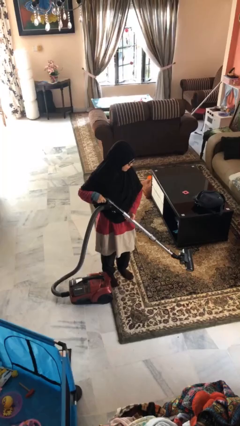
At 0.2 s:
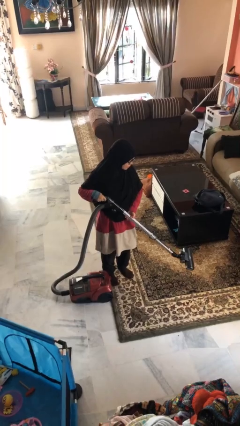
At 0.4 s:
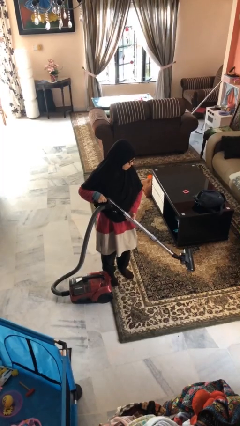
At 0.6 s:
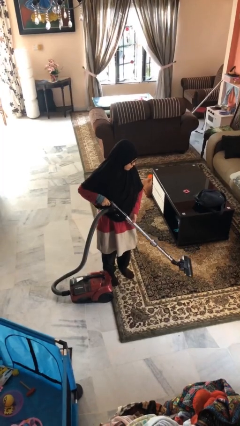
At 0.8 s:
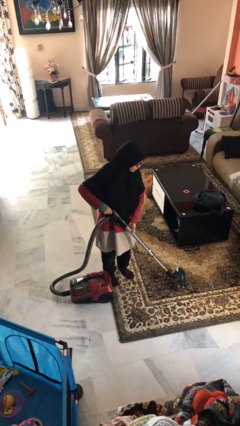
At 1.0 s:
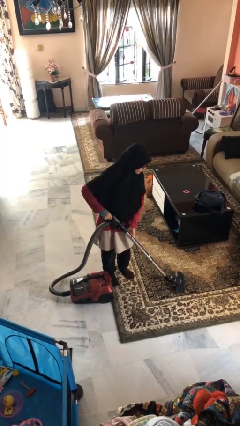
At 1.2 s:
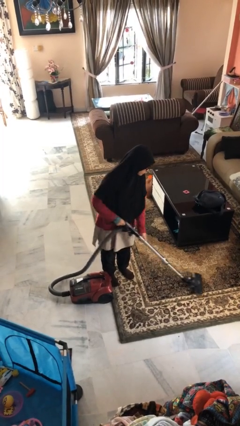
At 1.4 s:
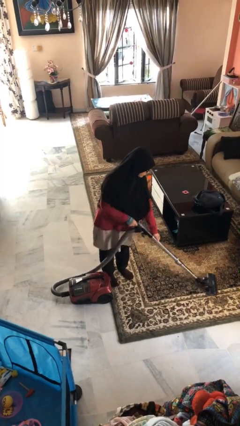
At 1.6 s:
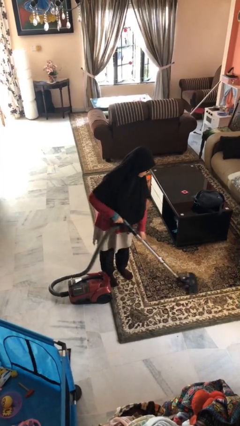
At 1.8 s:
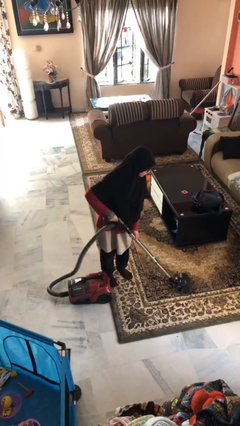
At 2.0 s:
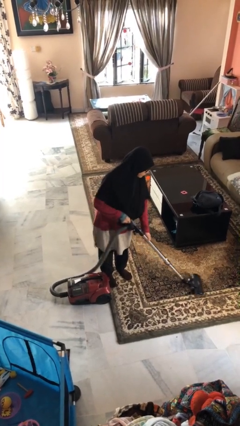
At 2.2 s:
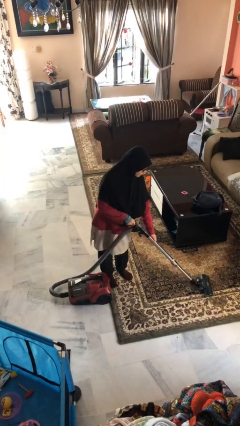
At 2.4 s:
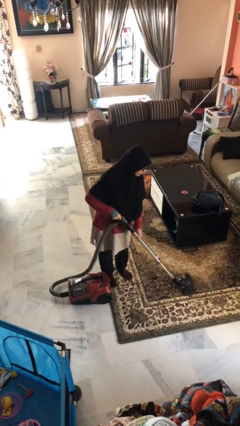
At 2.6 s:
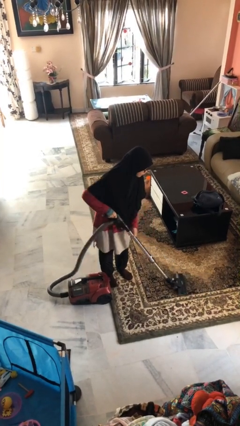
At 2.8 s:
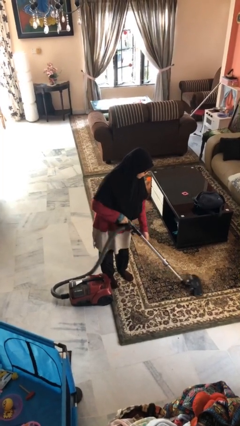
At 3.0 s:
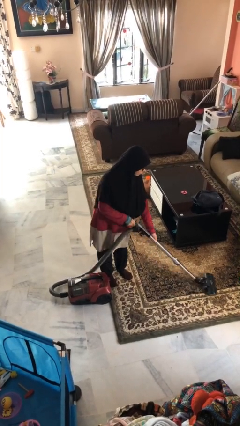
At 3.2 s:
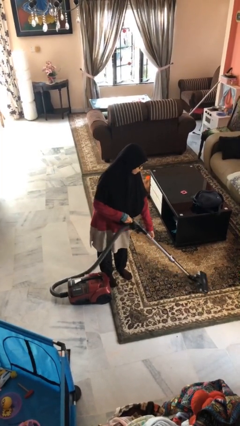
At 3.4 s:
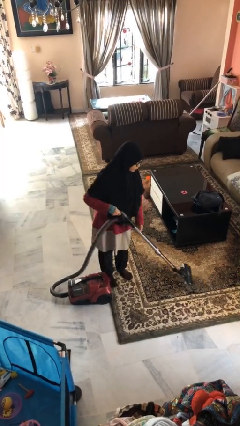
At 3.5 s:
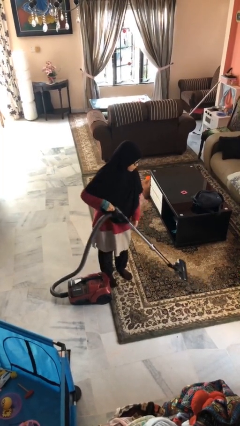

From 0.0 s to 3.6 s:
person vacuums carpet

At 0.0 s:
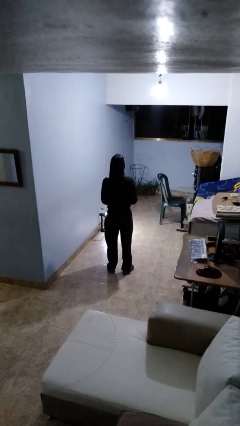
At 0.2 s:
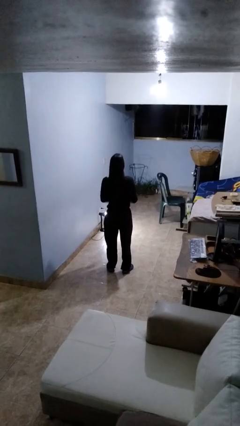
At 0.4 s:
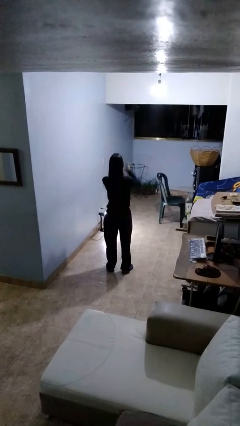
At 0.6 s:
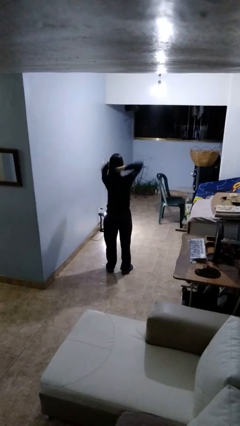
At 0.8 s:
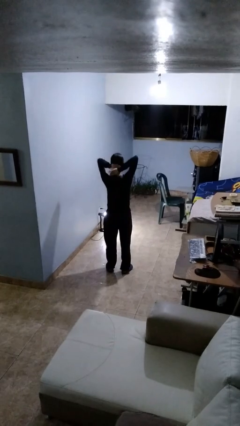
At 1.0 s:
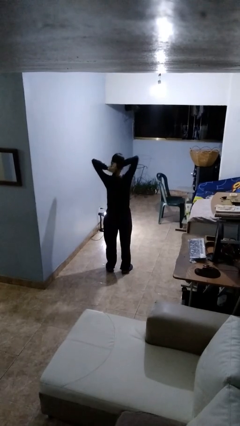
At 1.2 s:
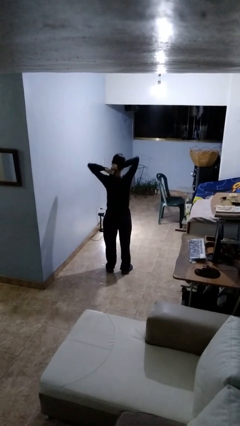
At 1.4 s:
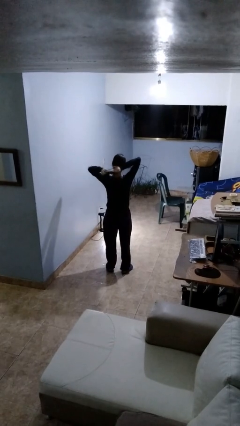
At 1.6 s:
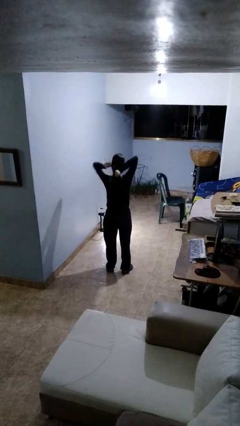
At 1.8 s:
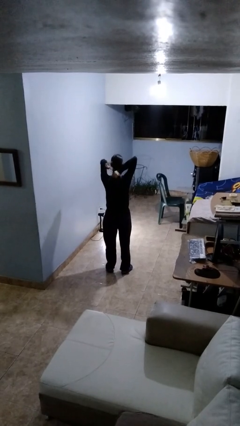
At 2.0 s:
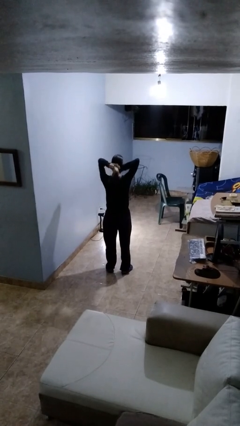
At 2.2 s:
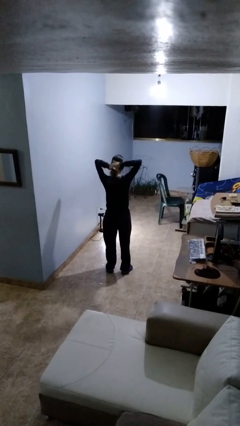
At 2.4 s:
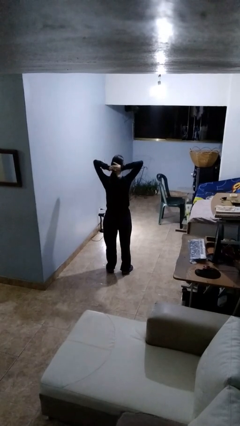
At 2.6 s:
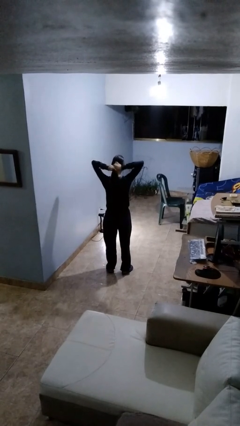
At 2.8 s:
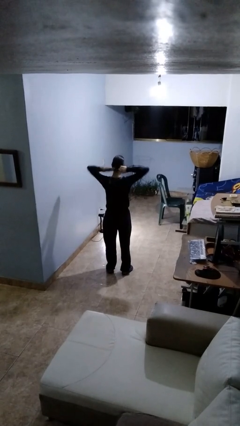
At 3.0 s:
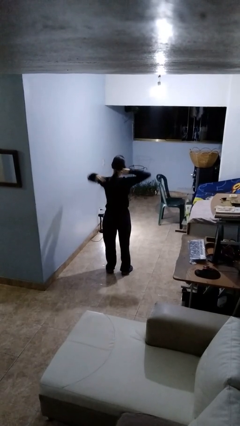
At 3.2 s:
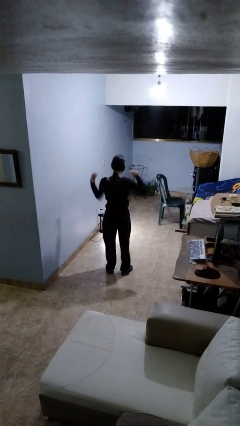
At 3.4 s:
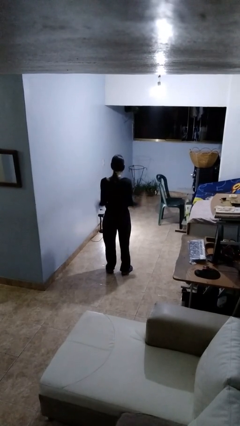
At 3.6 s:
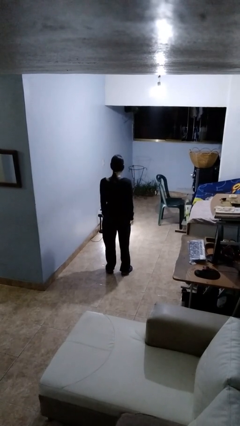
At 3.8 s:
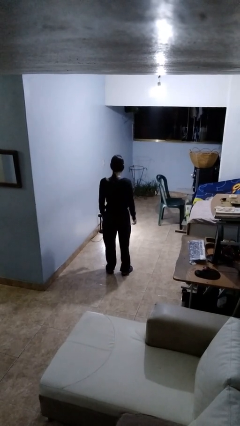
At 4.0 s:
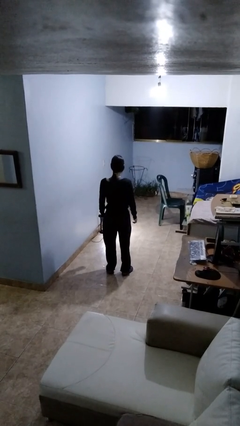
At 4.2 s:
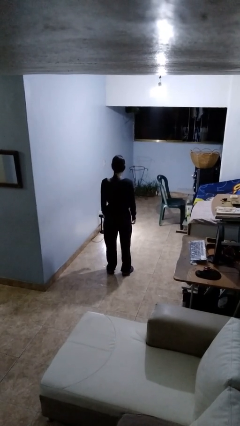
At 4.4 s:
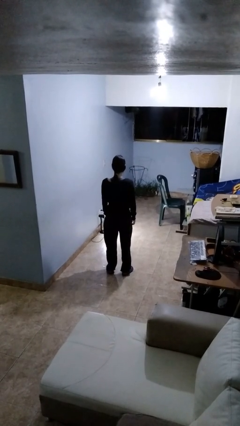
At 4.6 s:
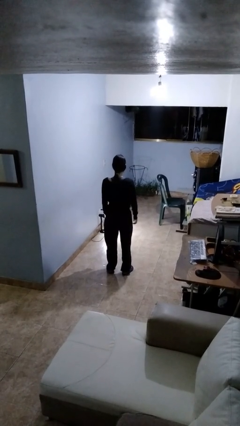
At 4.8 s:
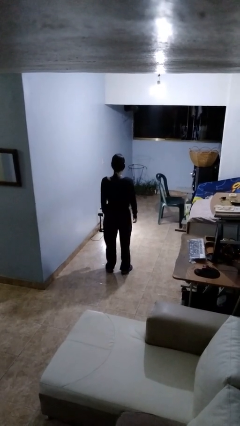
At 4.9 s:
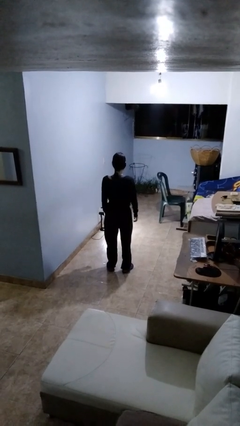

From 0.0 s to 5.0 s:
person puts hair in ponytail

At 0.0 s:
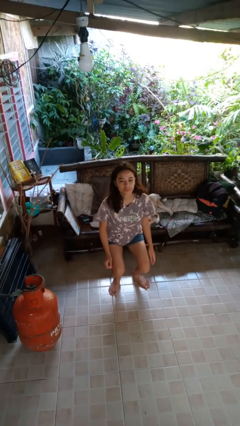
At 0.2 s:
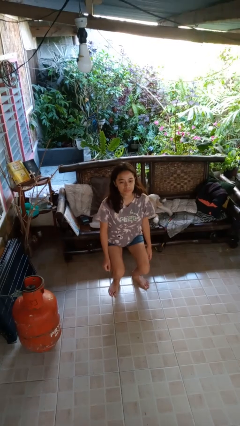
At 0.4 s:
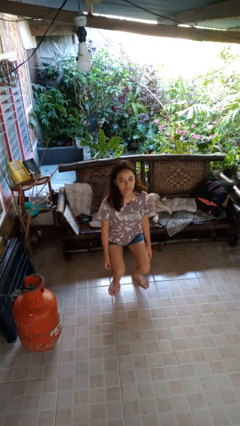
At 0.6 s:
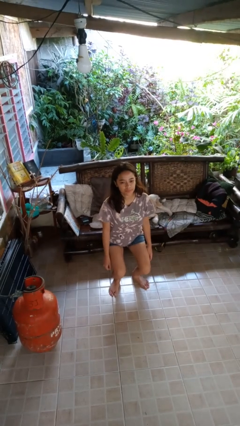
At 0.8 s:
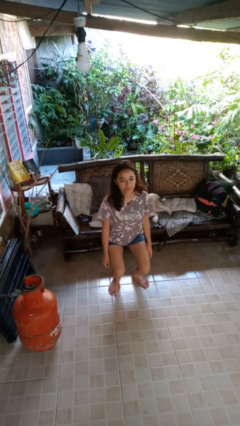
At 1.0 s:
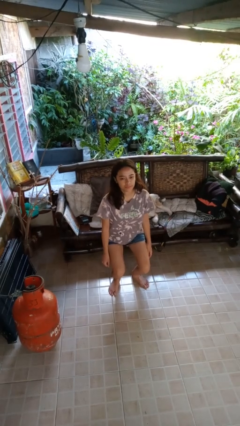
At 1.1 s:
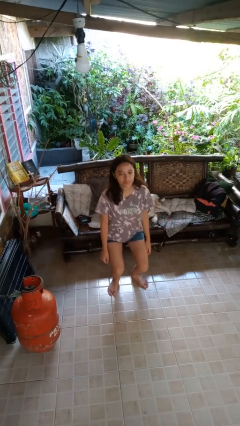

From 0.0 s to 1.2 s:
person squats

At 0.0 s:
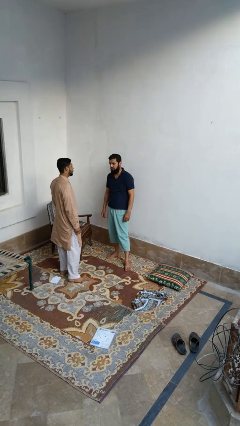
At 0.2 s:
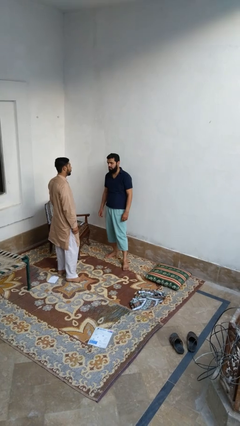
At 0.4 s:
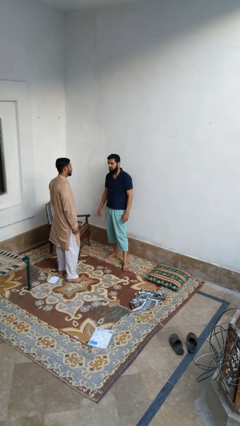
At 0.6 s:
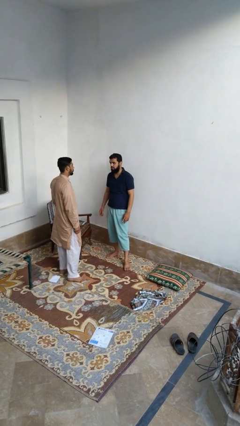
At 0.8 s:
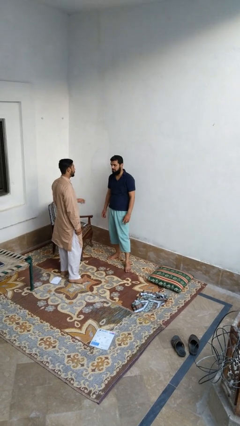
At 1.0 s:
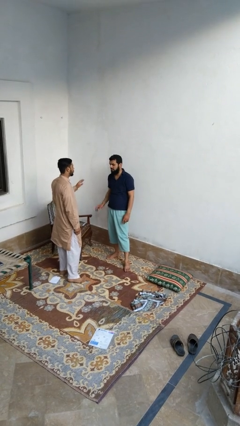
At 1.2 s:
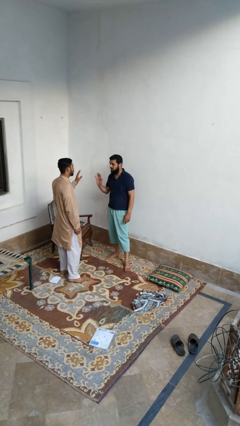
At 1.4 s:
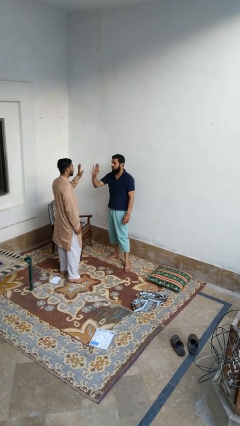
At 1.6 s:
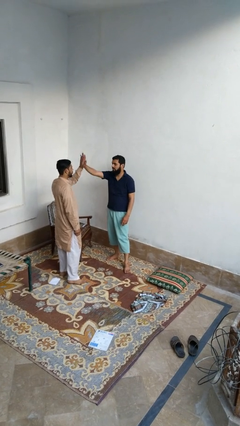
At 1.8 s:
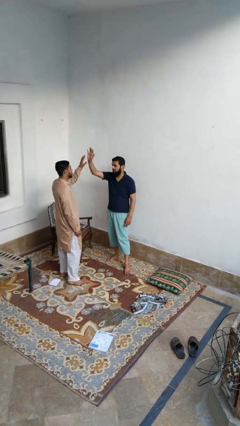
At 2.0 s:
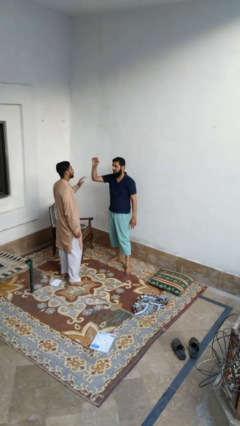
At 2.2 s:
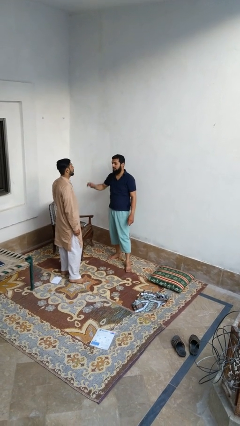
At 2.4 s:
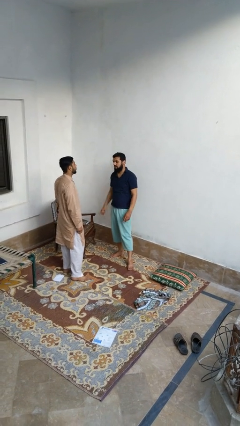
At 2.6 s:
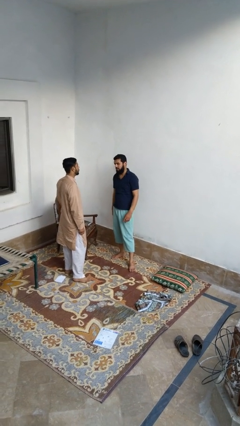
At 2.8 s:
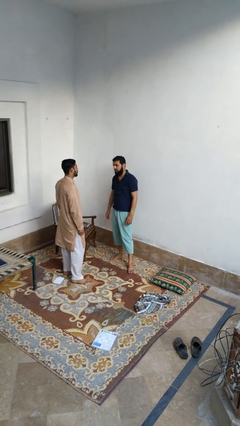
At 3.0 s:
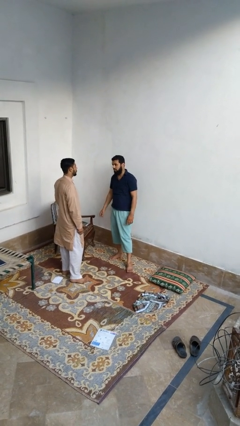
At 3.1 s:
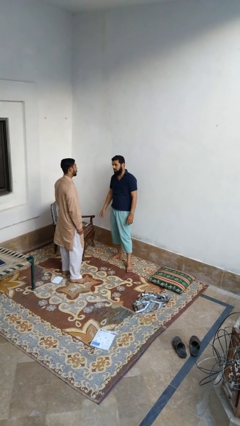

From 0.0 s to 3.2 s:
person highfives hand

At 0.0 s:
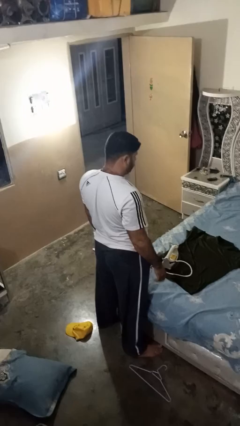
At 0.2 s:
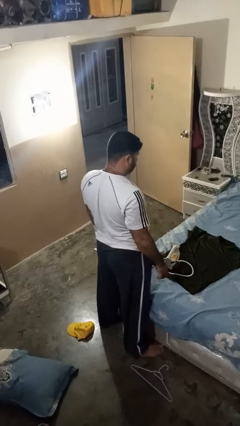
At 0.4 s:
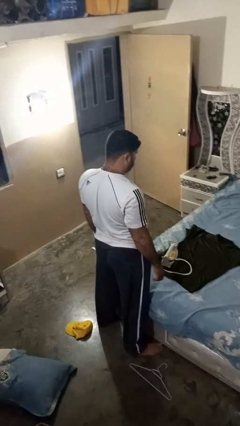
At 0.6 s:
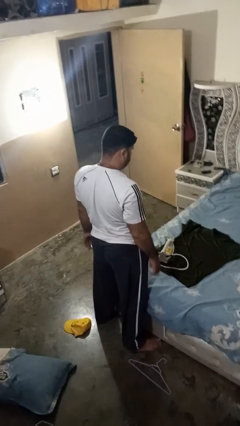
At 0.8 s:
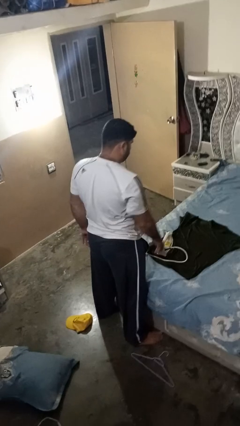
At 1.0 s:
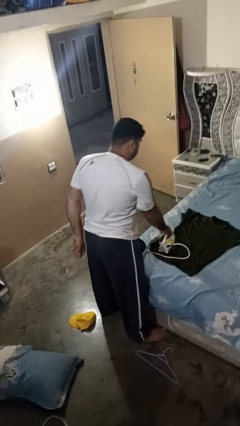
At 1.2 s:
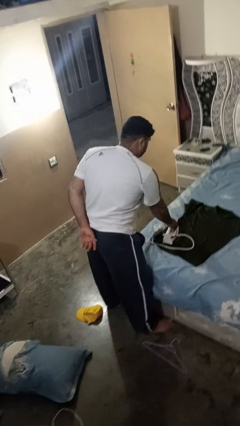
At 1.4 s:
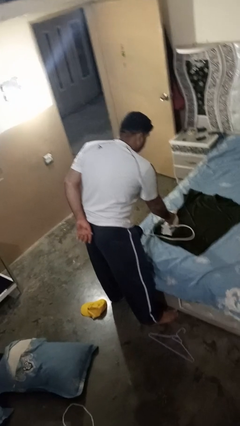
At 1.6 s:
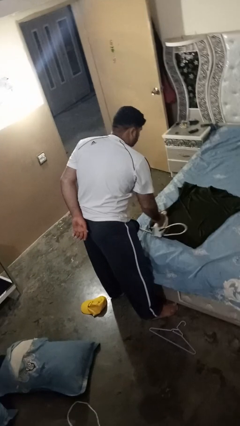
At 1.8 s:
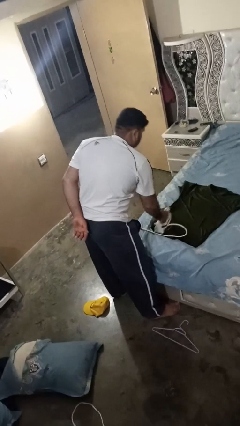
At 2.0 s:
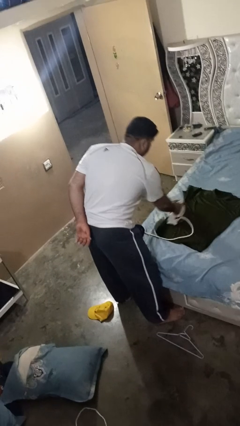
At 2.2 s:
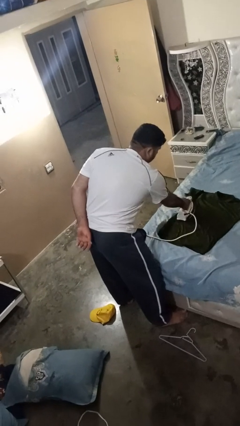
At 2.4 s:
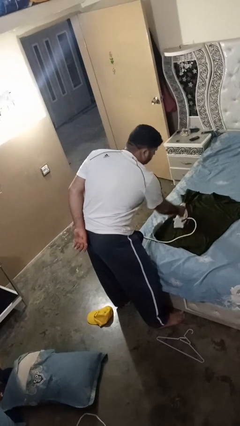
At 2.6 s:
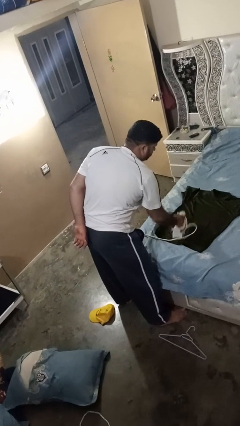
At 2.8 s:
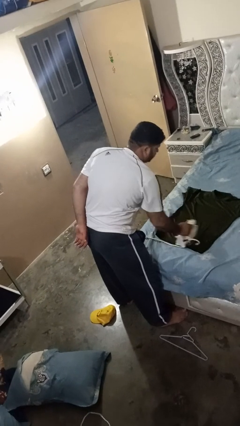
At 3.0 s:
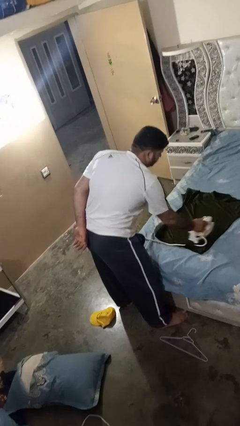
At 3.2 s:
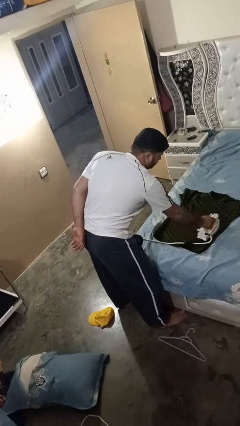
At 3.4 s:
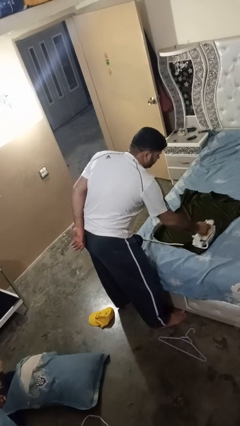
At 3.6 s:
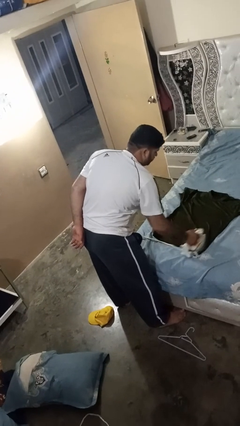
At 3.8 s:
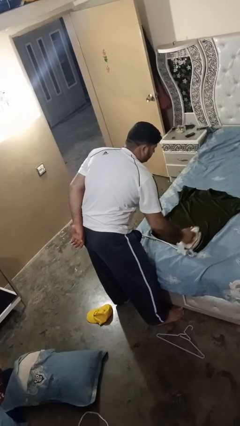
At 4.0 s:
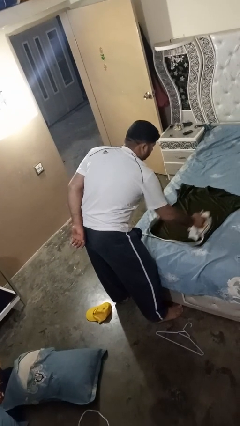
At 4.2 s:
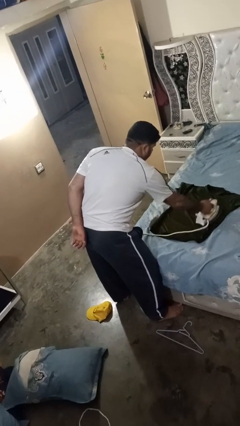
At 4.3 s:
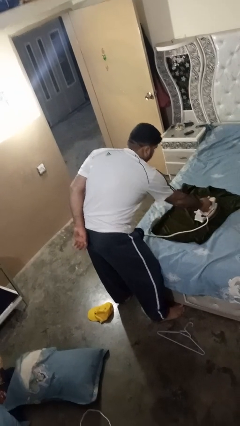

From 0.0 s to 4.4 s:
person irons clothes

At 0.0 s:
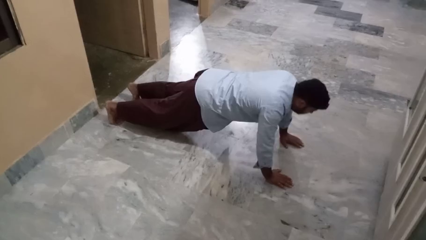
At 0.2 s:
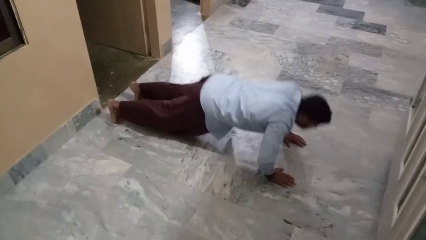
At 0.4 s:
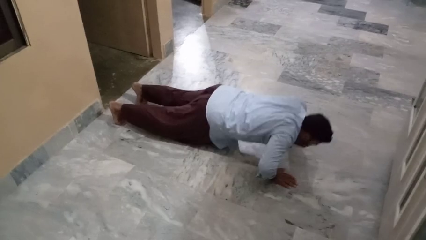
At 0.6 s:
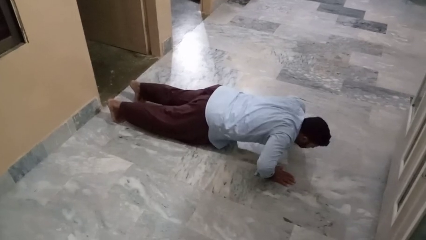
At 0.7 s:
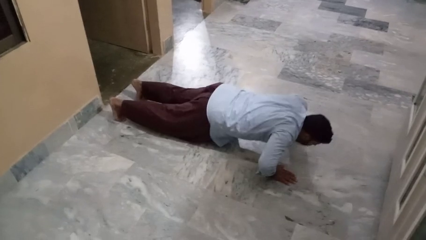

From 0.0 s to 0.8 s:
person exercises with pushup
